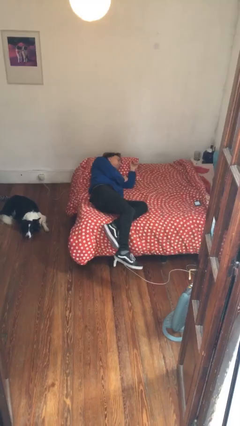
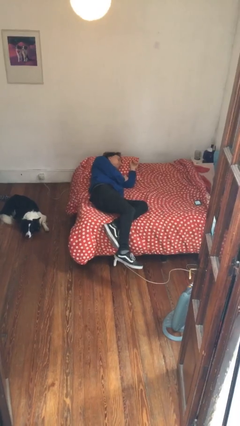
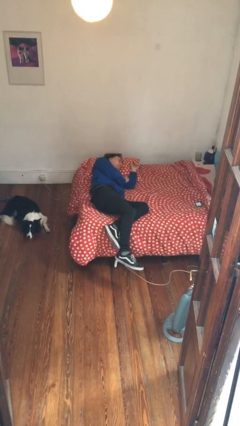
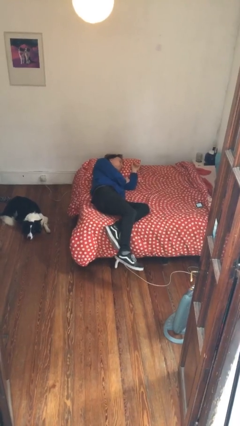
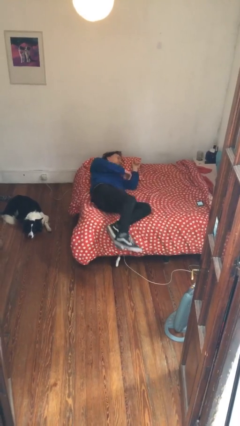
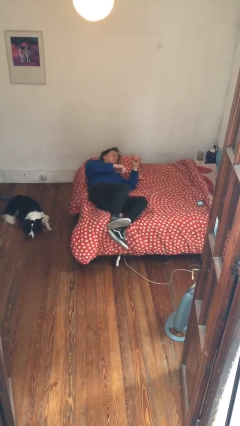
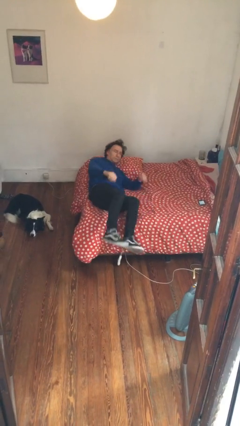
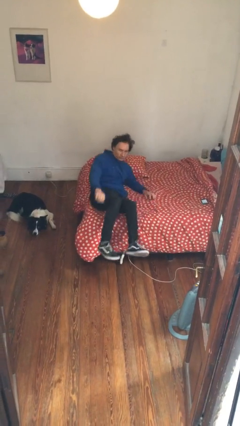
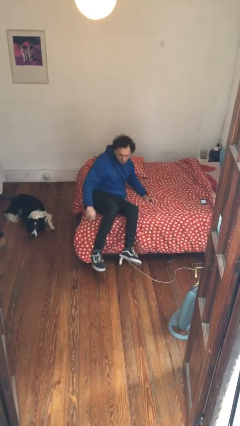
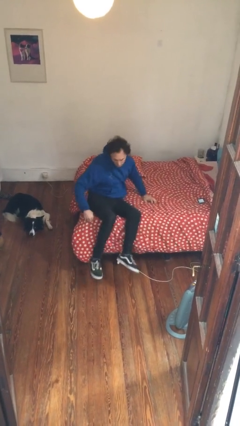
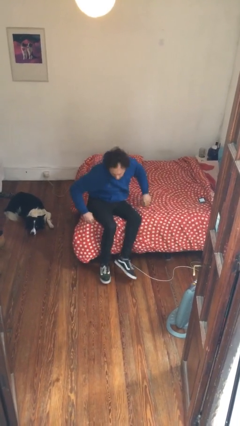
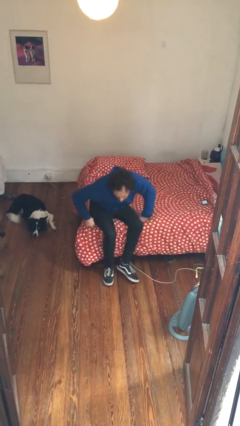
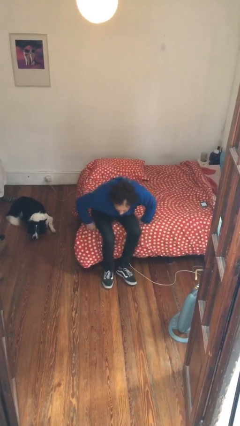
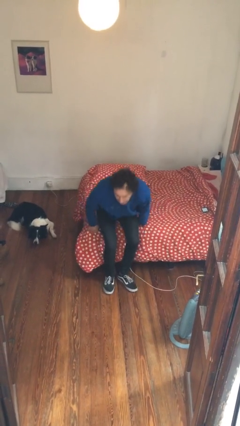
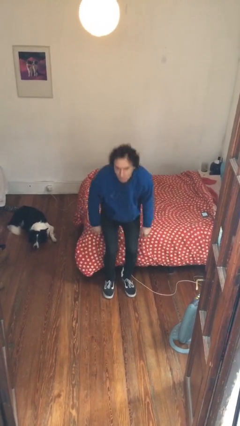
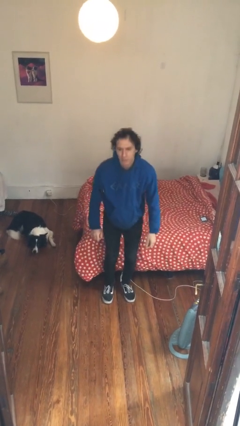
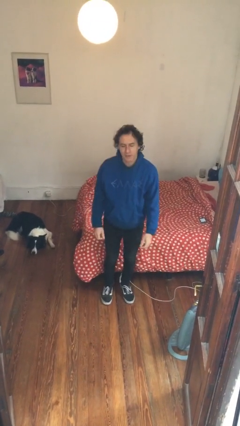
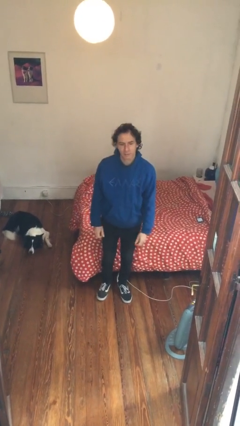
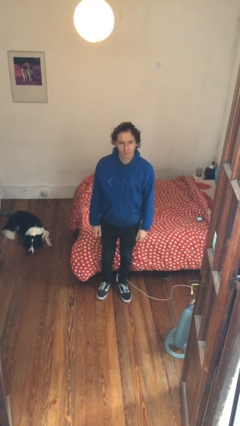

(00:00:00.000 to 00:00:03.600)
person stands up

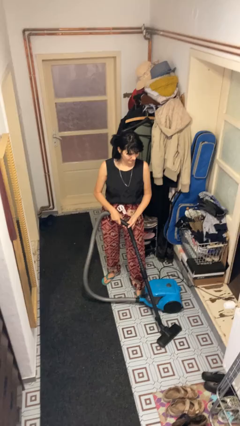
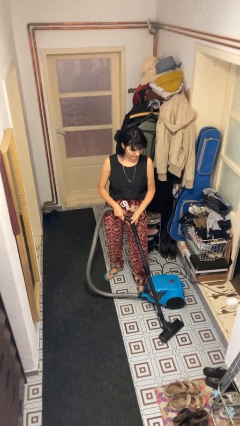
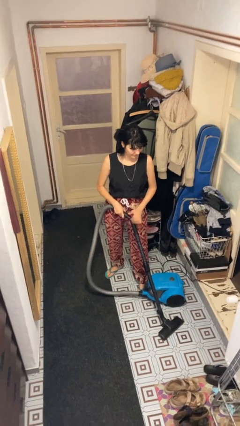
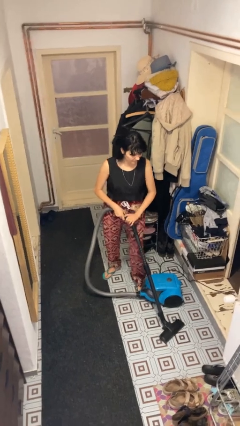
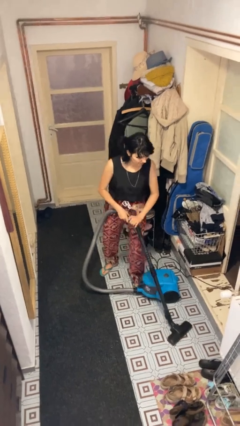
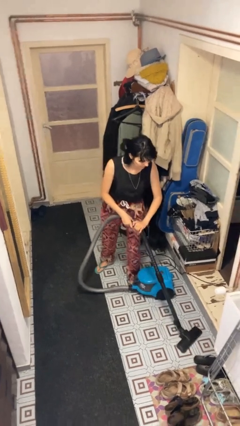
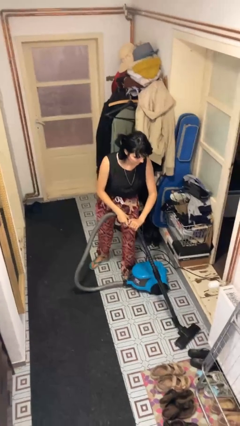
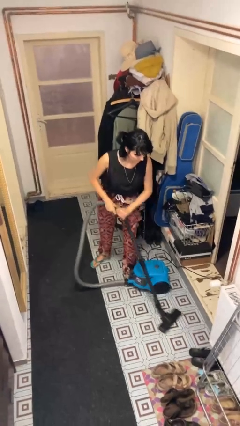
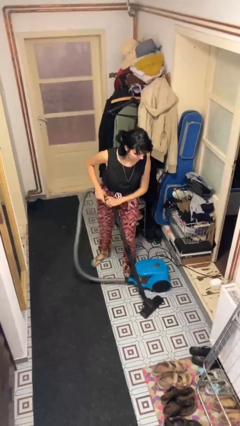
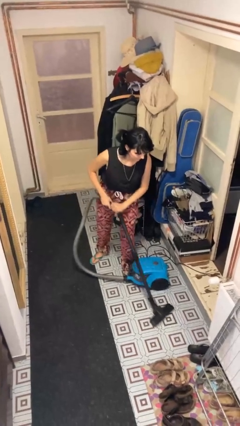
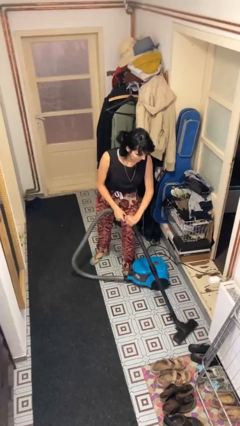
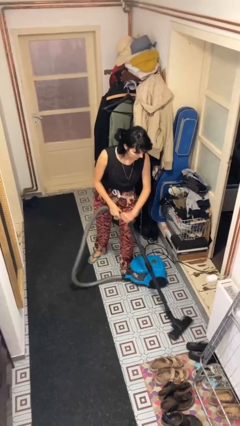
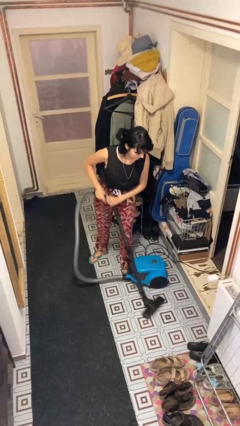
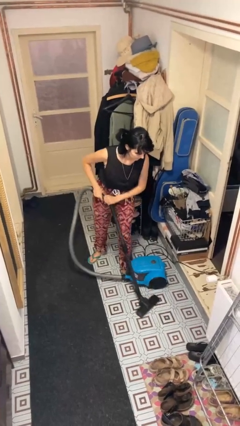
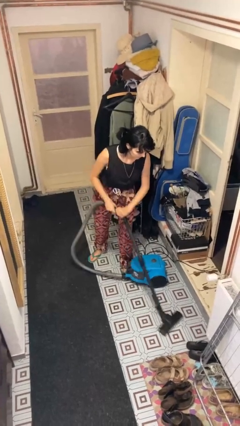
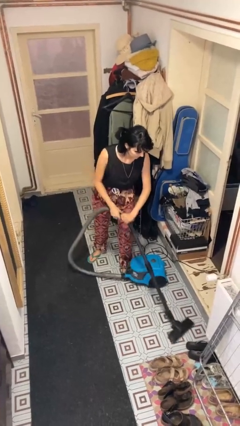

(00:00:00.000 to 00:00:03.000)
person vacuums carpet

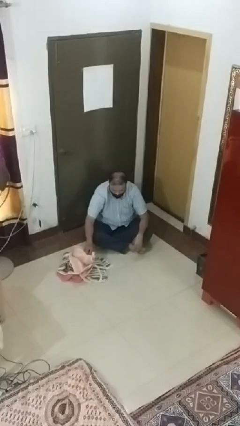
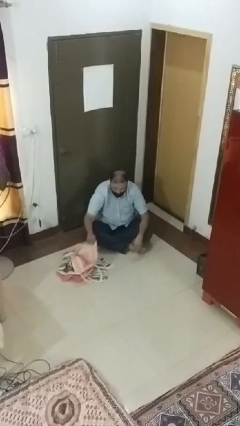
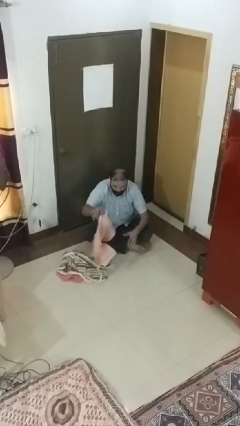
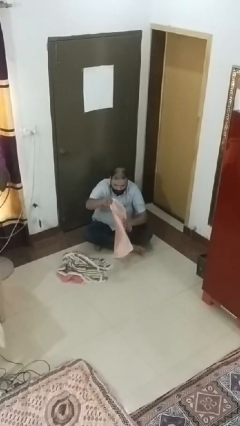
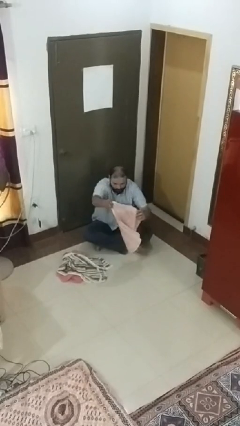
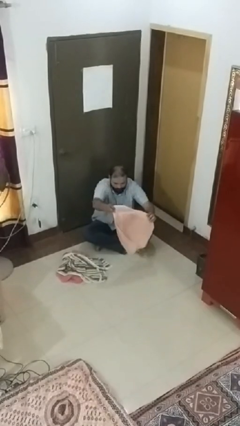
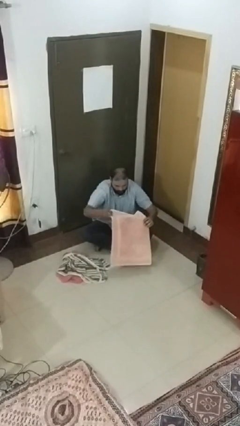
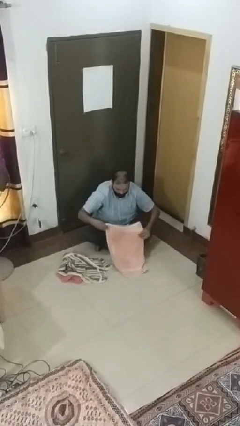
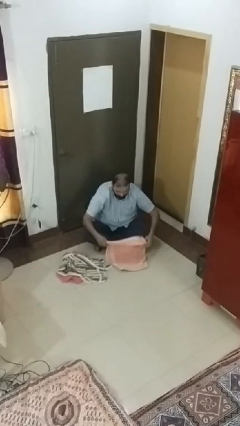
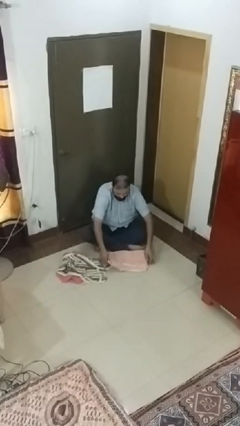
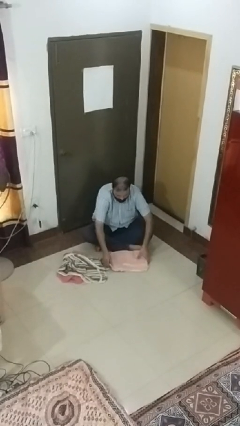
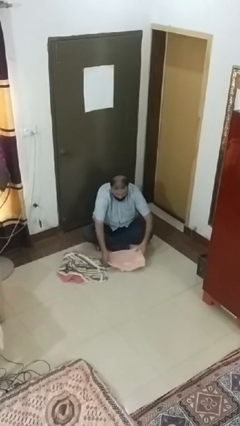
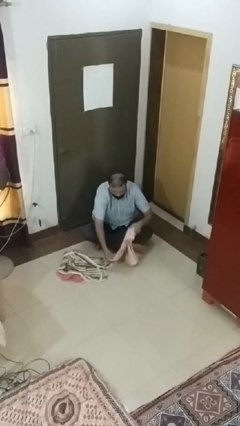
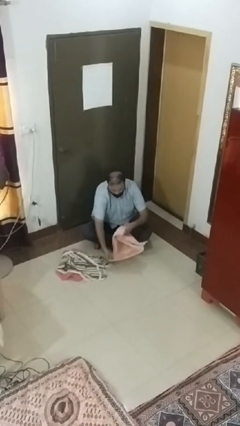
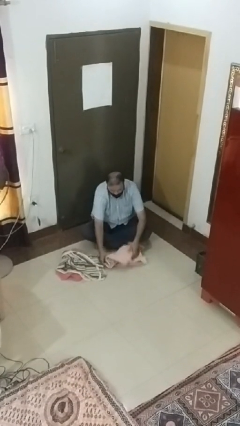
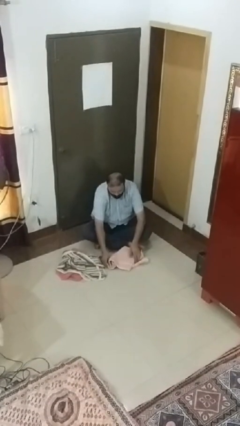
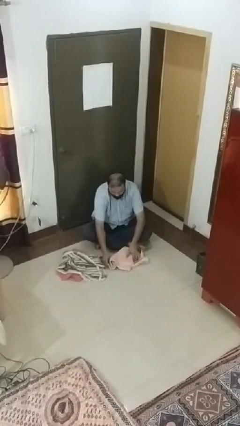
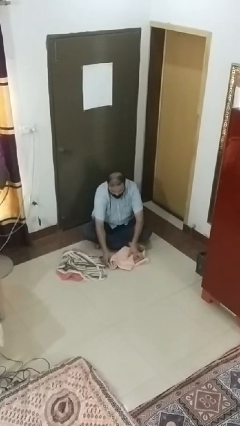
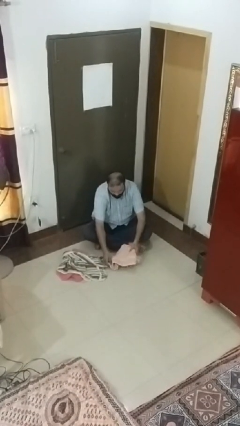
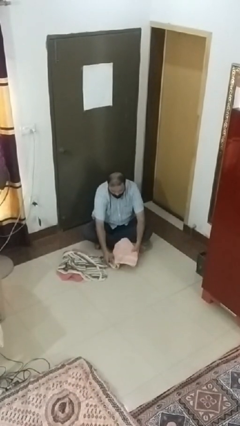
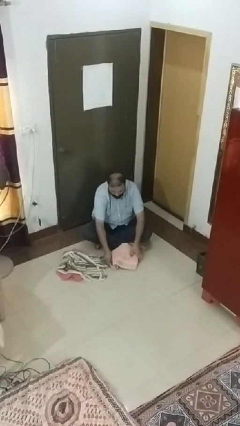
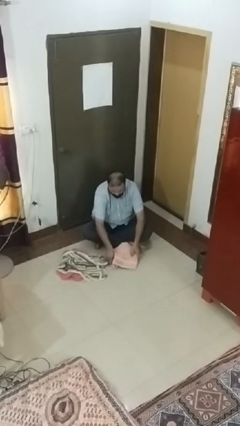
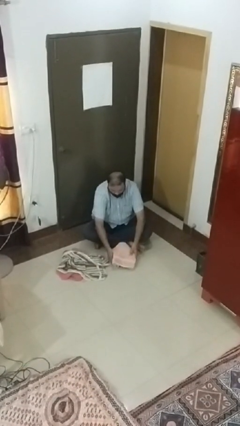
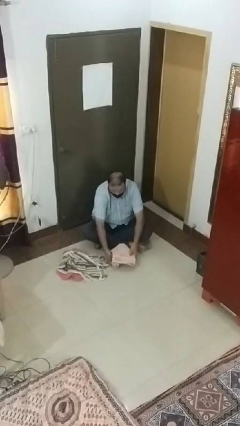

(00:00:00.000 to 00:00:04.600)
person folds towel

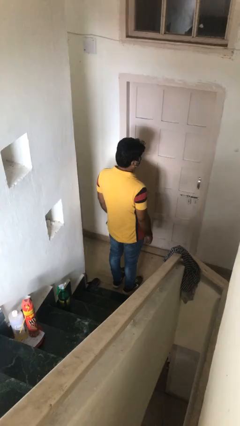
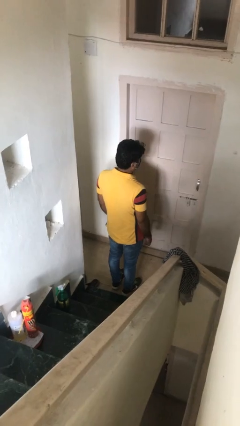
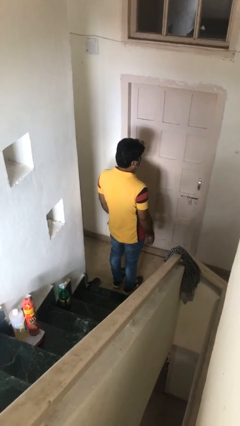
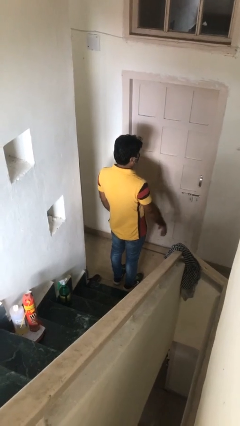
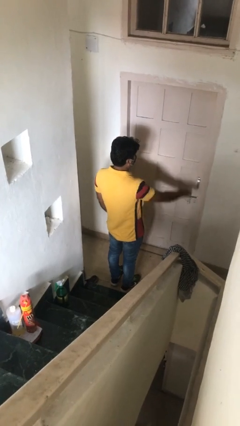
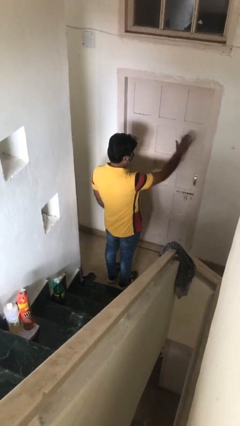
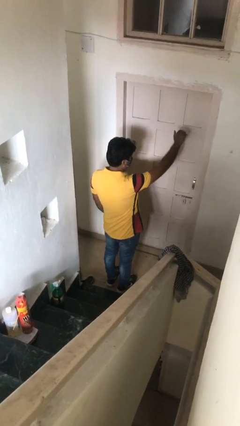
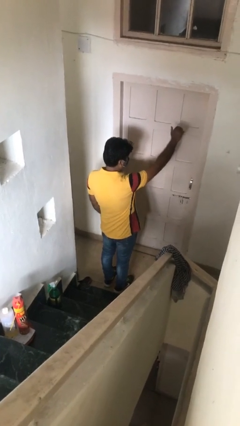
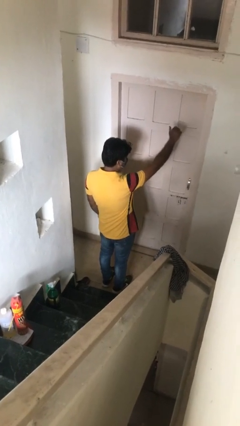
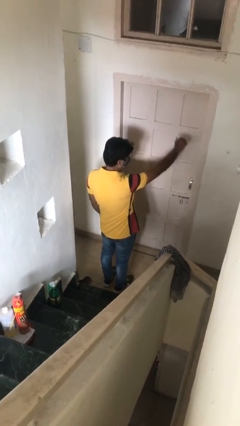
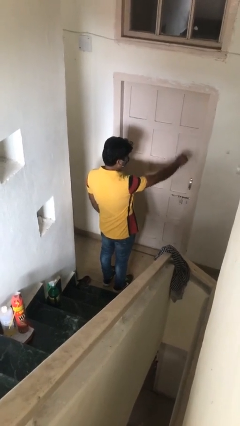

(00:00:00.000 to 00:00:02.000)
person gestures come here

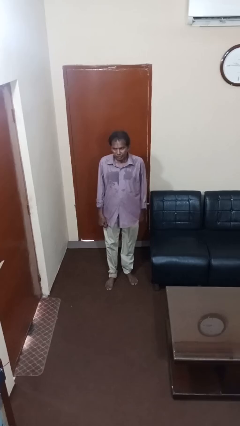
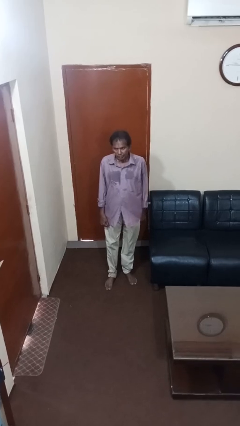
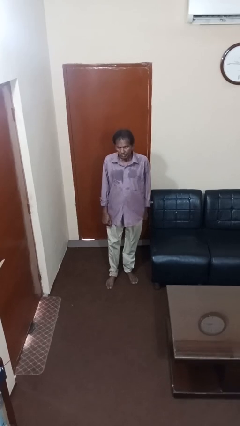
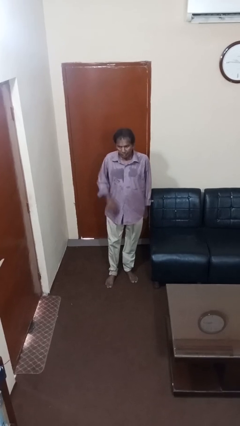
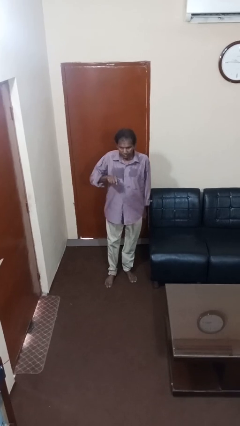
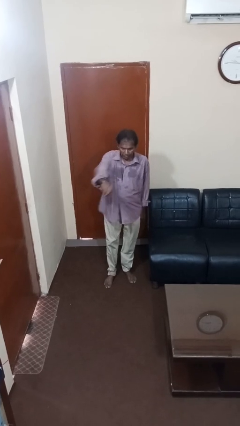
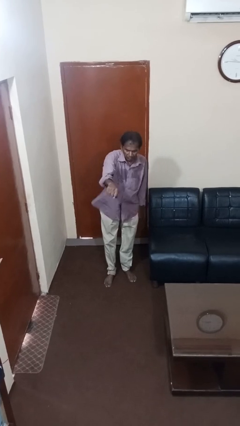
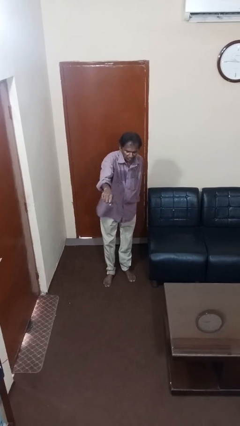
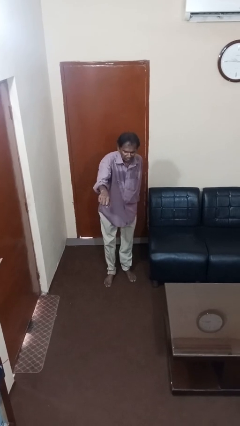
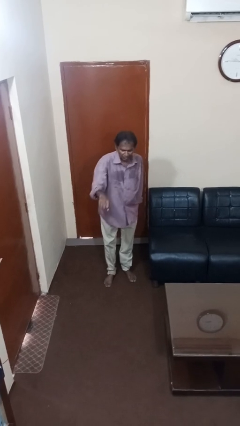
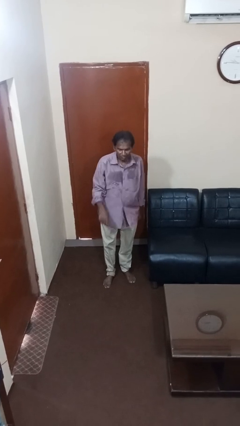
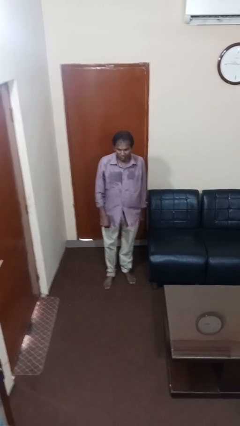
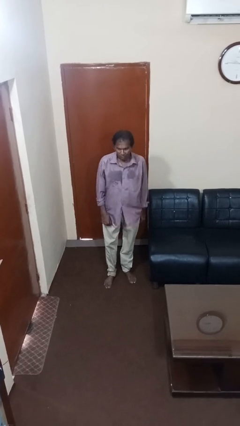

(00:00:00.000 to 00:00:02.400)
person karate chop

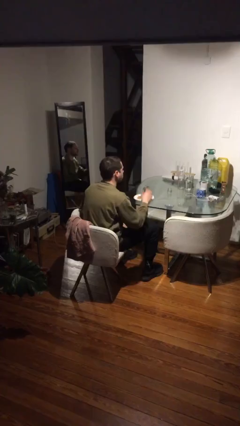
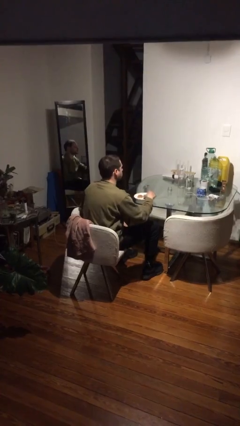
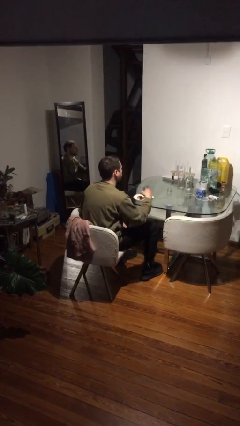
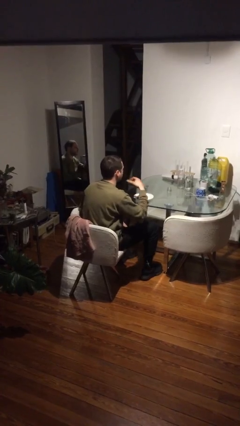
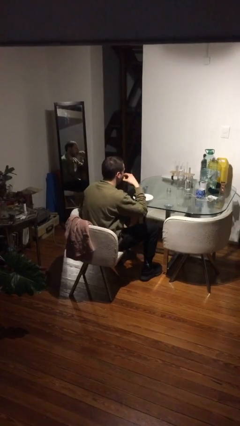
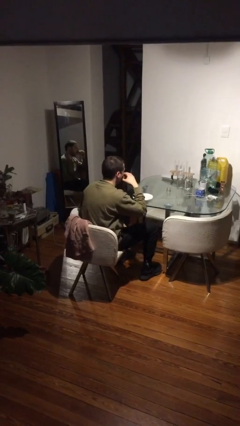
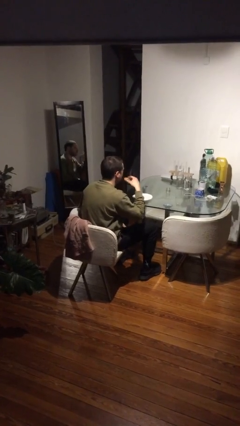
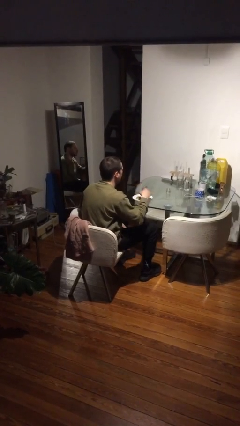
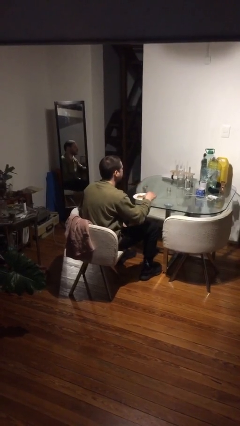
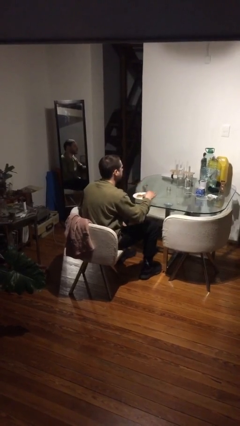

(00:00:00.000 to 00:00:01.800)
person eats with hands
